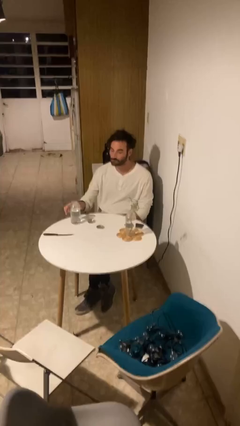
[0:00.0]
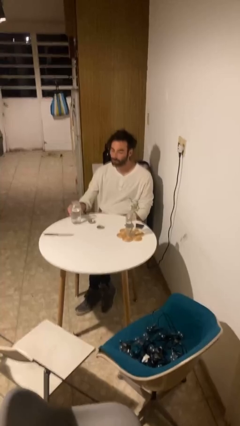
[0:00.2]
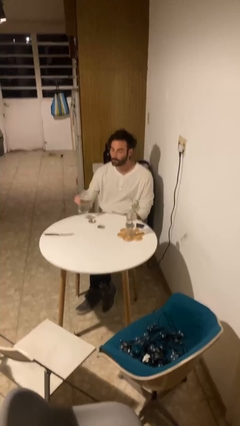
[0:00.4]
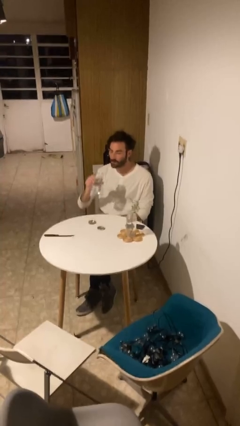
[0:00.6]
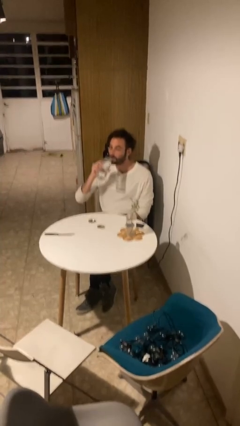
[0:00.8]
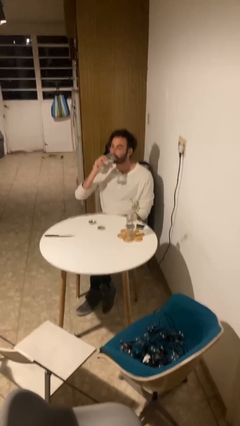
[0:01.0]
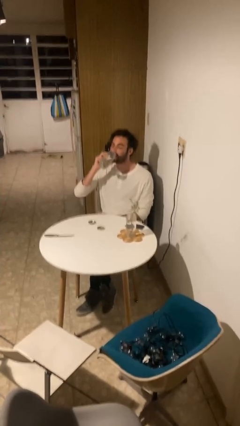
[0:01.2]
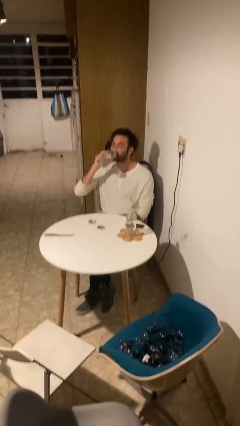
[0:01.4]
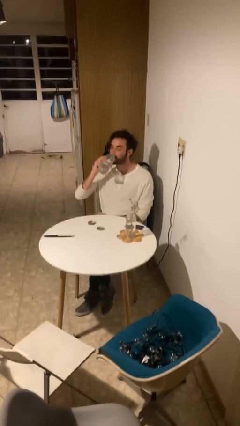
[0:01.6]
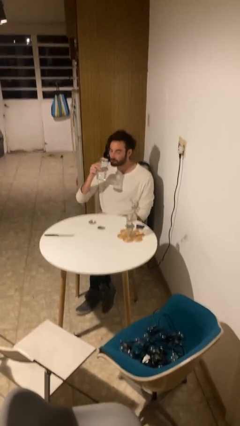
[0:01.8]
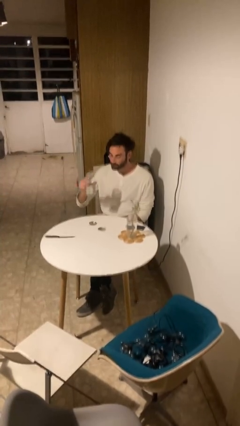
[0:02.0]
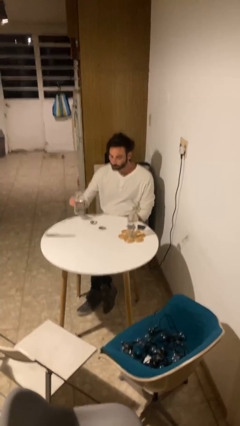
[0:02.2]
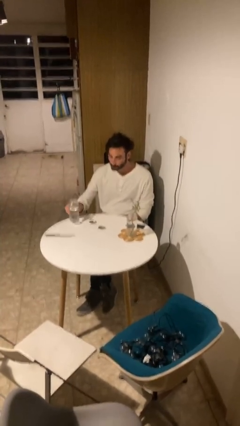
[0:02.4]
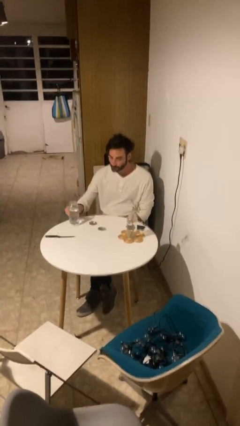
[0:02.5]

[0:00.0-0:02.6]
person drinks from cup

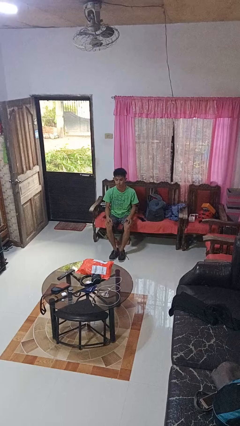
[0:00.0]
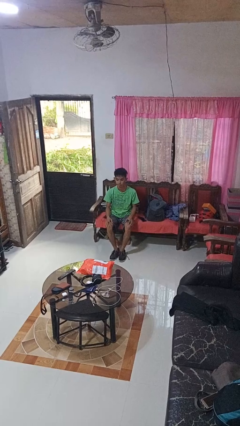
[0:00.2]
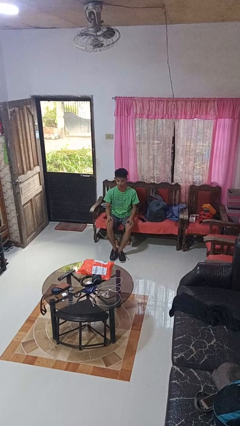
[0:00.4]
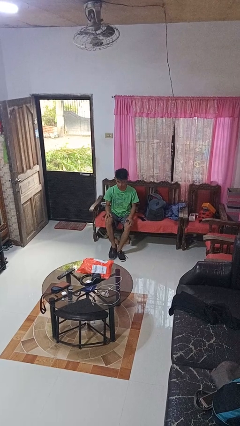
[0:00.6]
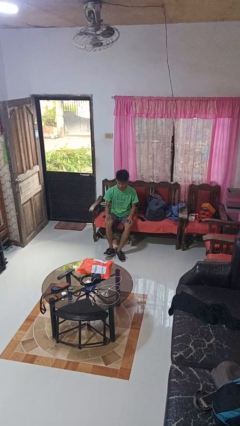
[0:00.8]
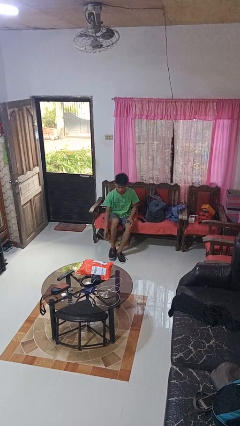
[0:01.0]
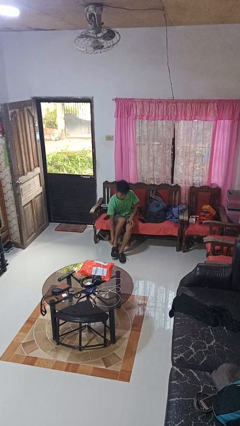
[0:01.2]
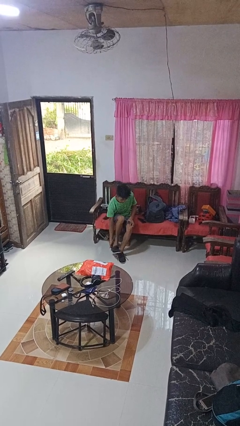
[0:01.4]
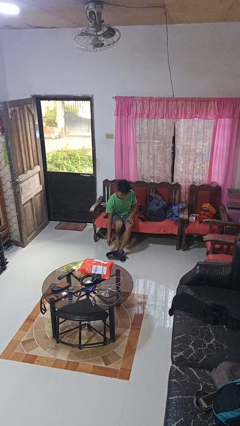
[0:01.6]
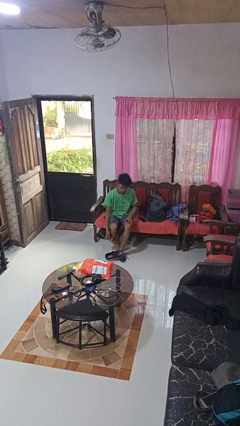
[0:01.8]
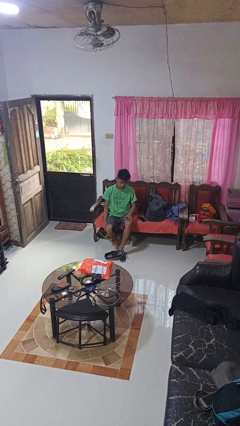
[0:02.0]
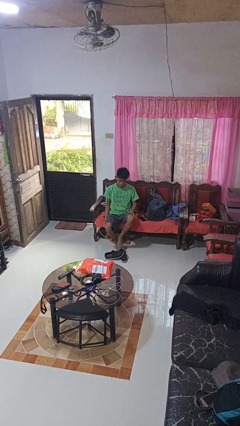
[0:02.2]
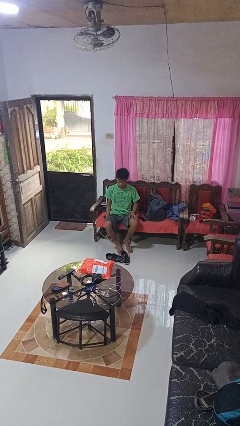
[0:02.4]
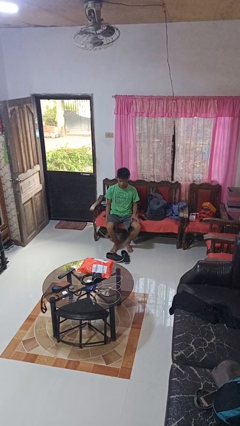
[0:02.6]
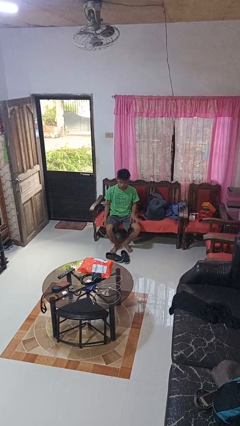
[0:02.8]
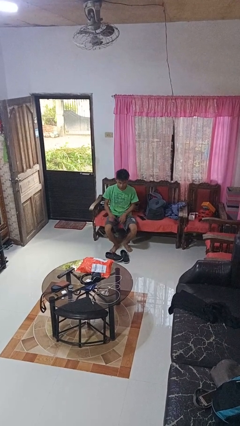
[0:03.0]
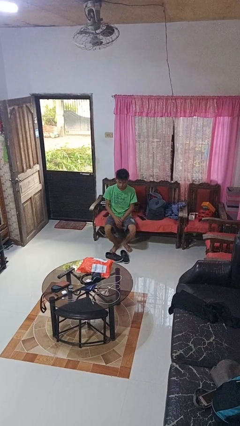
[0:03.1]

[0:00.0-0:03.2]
person takes off shoes

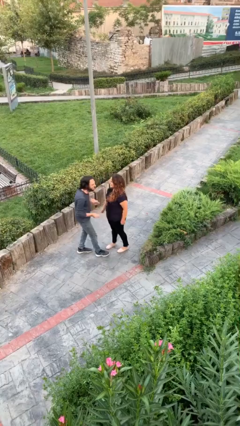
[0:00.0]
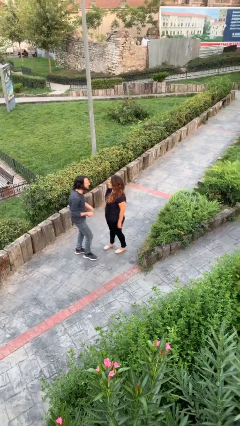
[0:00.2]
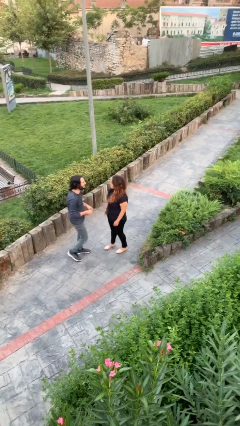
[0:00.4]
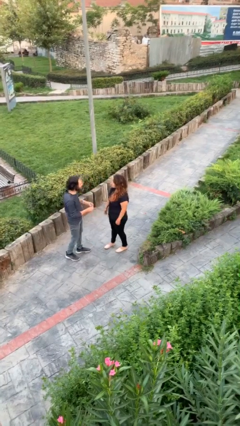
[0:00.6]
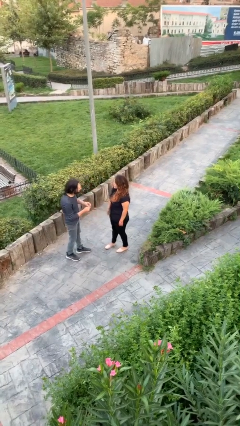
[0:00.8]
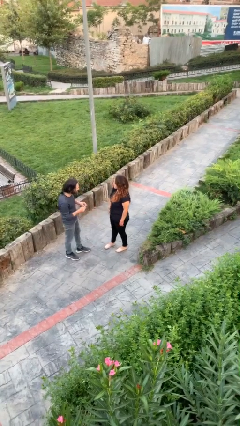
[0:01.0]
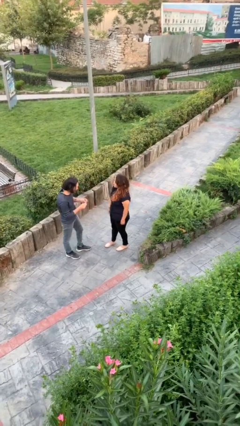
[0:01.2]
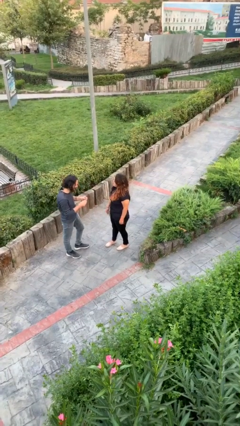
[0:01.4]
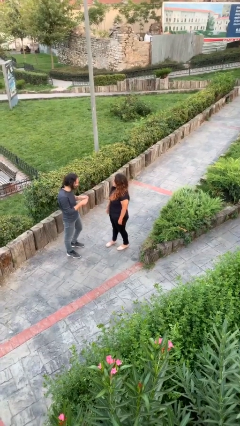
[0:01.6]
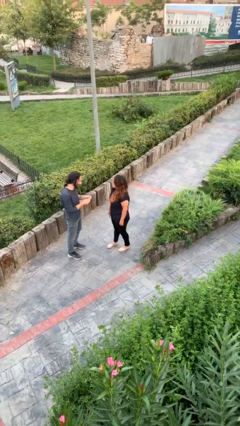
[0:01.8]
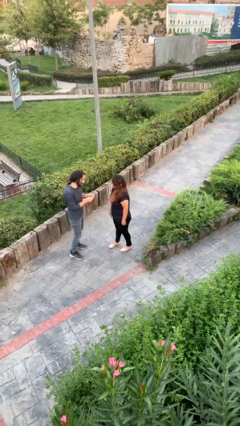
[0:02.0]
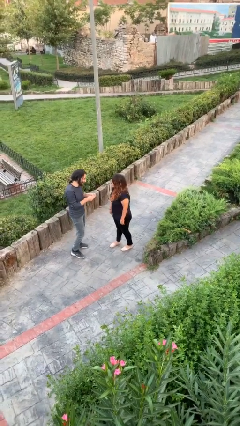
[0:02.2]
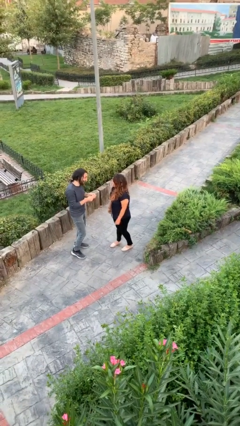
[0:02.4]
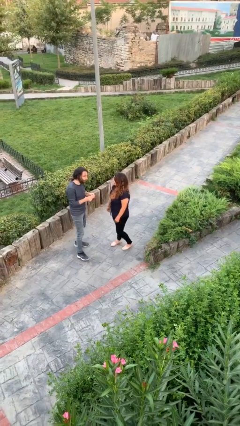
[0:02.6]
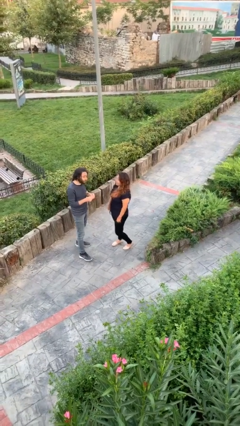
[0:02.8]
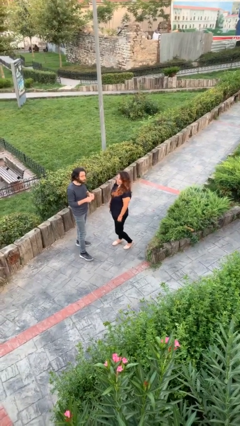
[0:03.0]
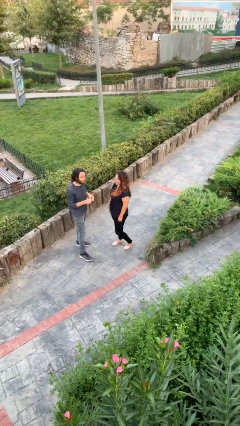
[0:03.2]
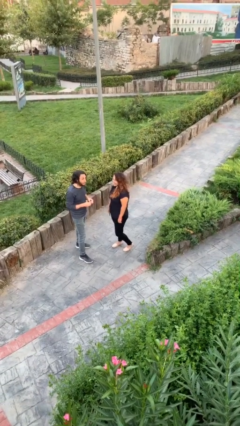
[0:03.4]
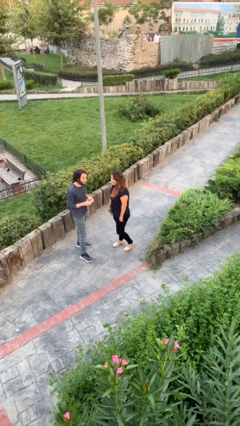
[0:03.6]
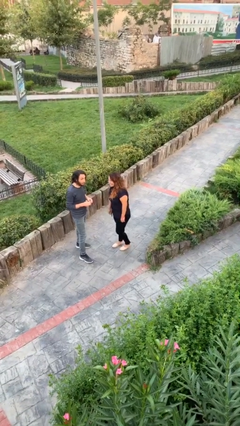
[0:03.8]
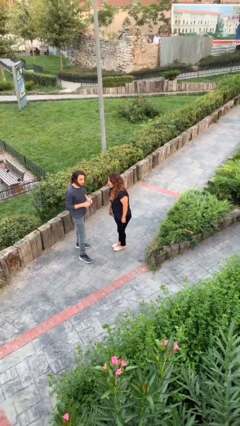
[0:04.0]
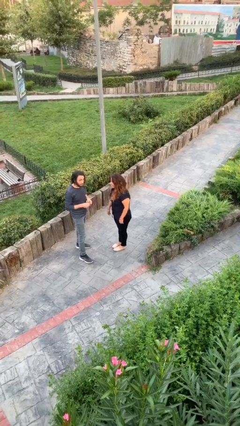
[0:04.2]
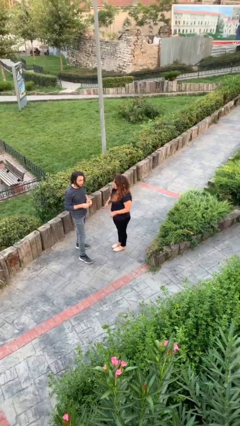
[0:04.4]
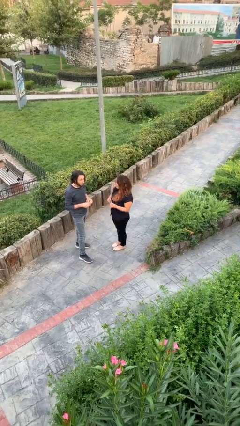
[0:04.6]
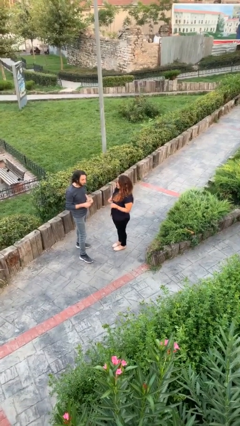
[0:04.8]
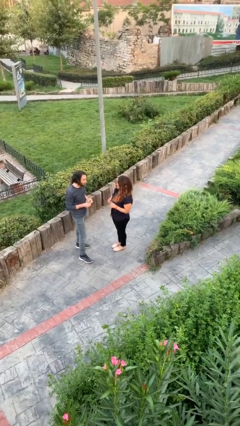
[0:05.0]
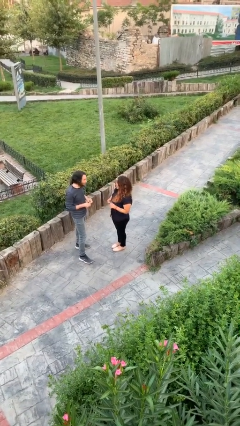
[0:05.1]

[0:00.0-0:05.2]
person talks to person

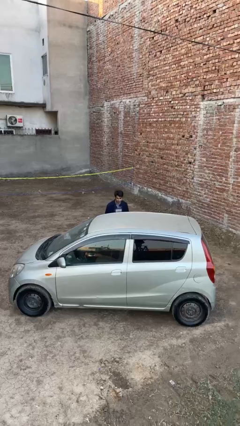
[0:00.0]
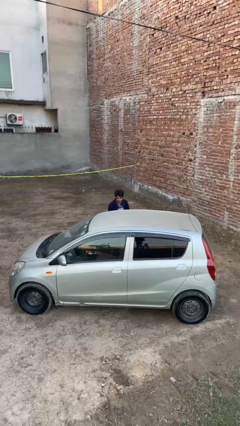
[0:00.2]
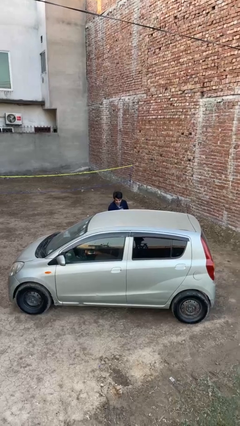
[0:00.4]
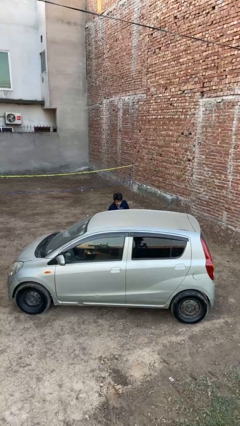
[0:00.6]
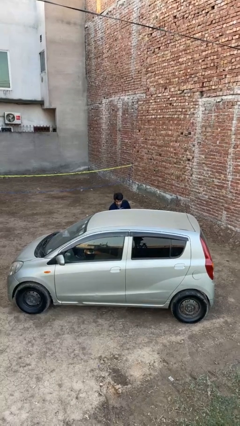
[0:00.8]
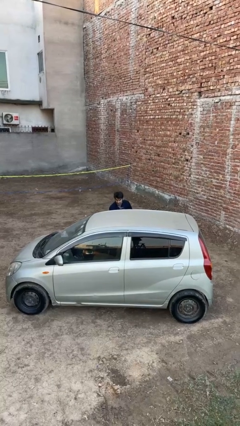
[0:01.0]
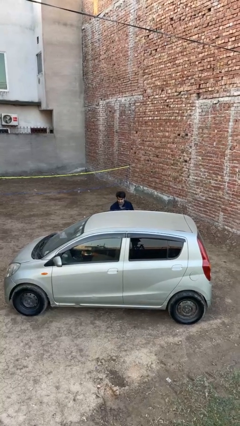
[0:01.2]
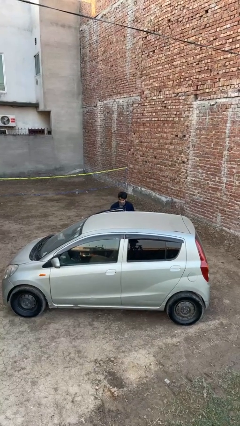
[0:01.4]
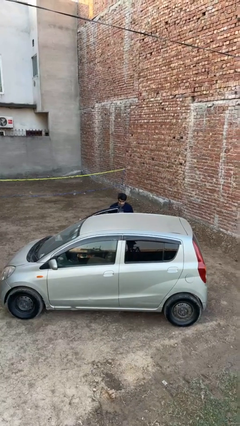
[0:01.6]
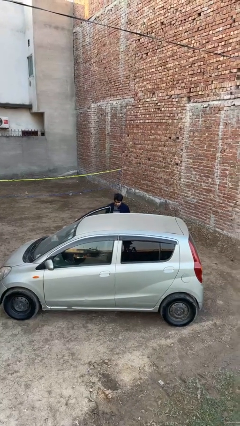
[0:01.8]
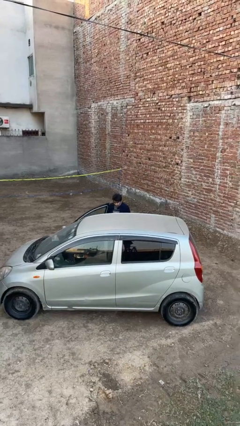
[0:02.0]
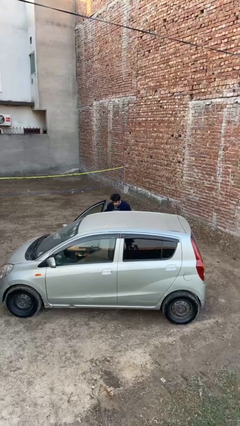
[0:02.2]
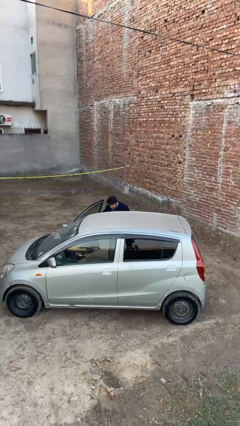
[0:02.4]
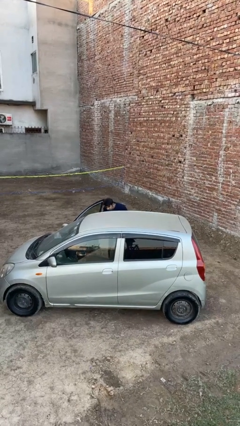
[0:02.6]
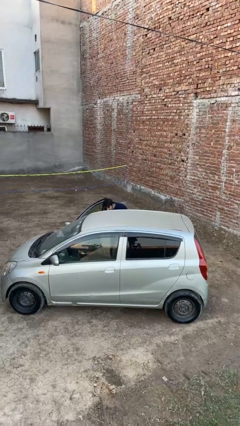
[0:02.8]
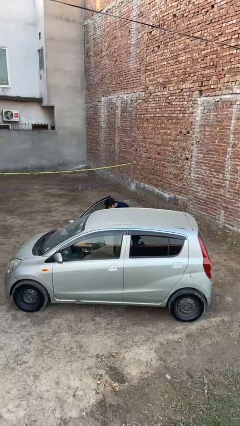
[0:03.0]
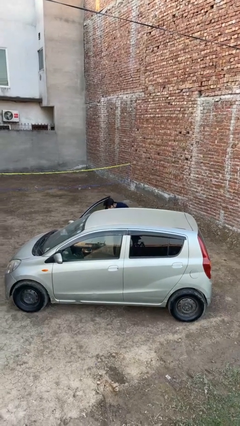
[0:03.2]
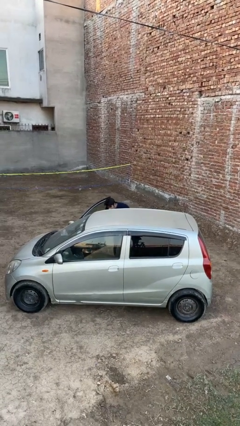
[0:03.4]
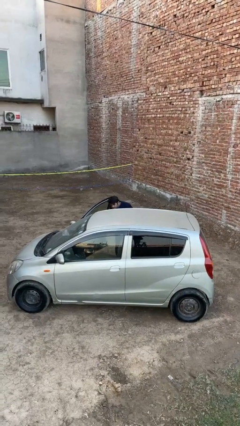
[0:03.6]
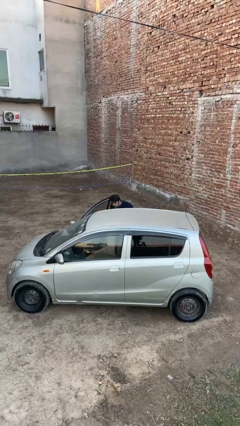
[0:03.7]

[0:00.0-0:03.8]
person opens car door

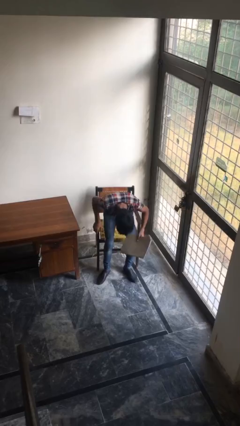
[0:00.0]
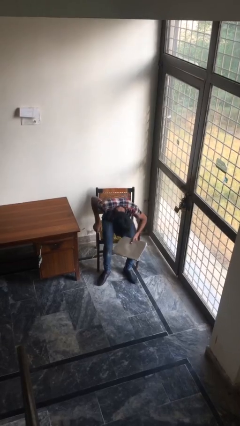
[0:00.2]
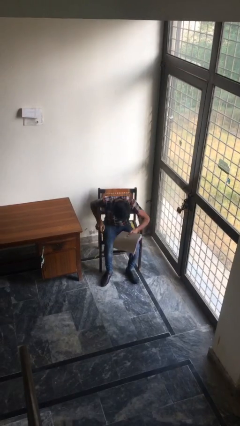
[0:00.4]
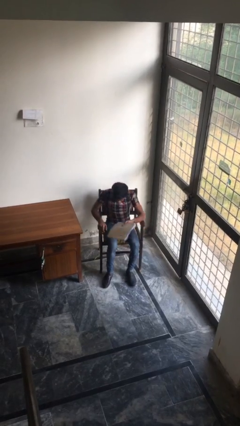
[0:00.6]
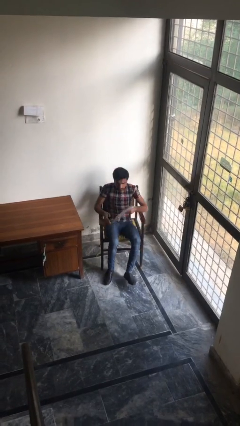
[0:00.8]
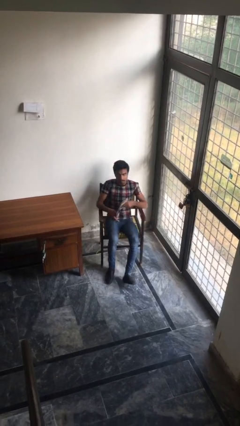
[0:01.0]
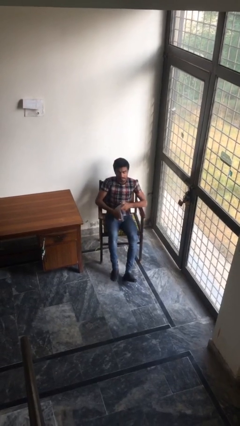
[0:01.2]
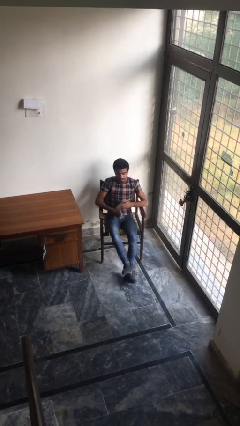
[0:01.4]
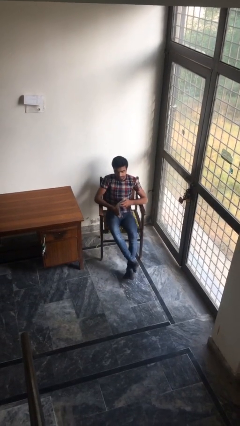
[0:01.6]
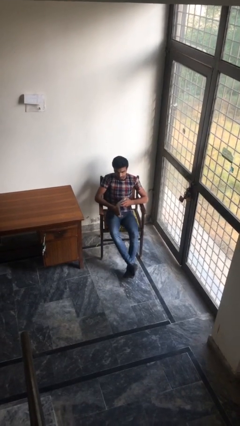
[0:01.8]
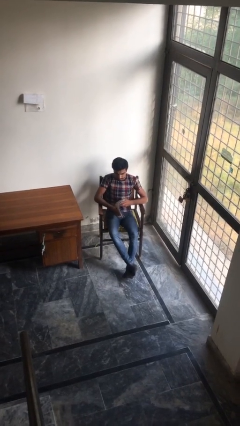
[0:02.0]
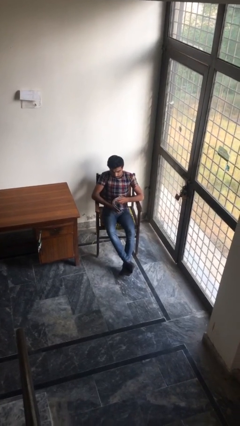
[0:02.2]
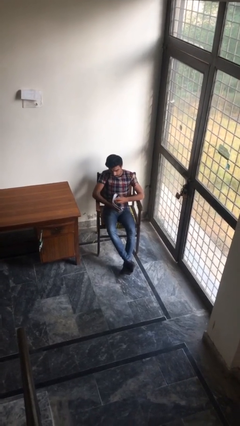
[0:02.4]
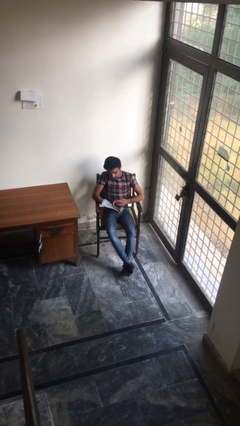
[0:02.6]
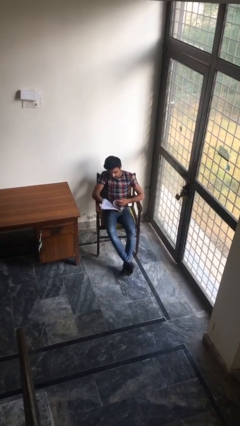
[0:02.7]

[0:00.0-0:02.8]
person sits down
